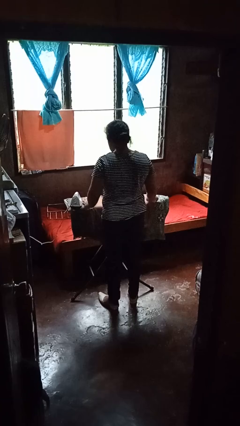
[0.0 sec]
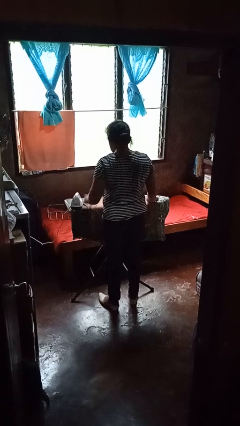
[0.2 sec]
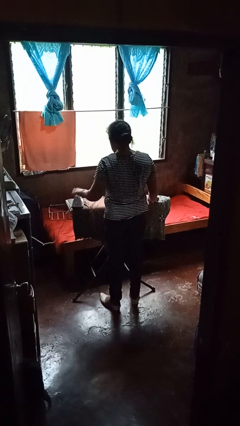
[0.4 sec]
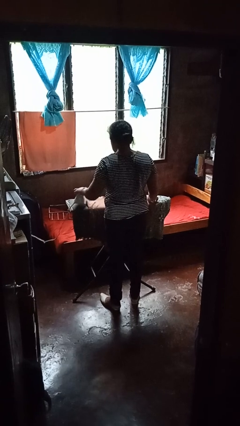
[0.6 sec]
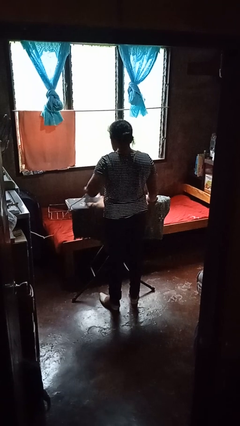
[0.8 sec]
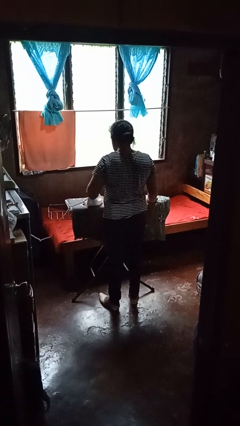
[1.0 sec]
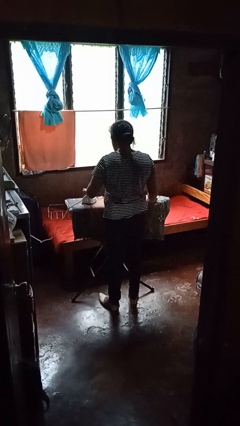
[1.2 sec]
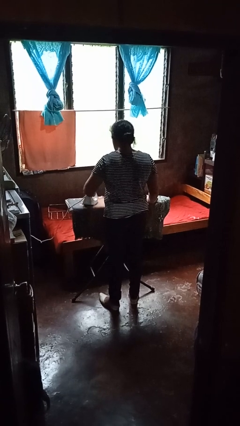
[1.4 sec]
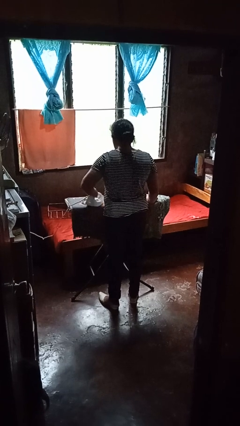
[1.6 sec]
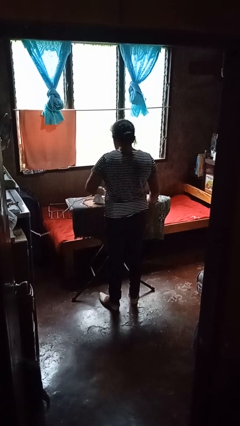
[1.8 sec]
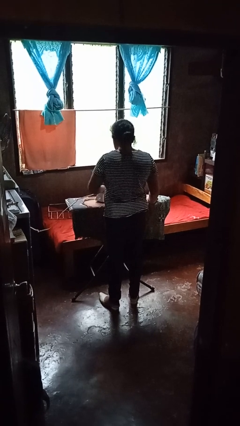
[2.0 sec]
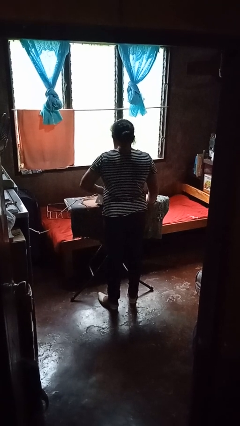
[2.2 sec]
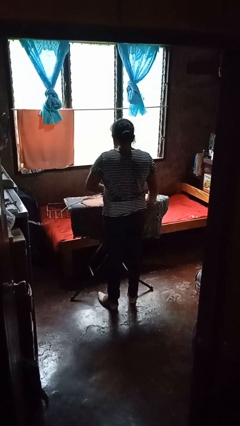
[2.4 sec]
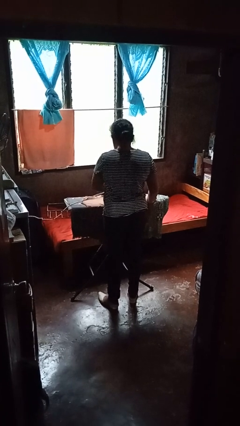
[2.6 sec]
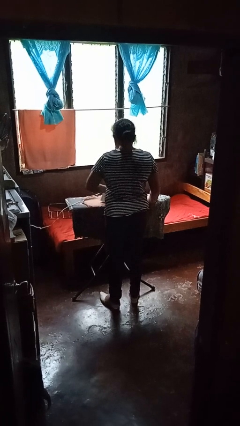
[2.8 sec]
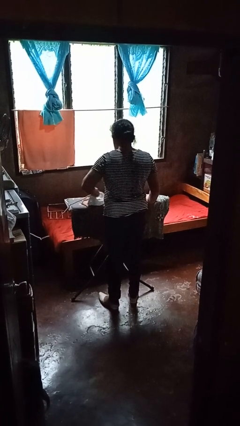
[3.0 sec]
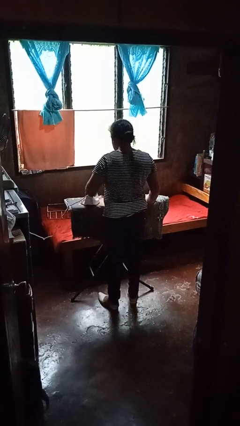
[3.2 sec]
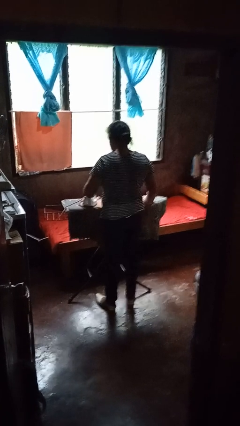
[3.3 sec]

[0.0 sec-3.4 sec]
person irons clothes

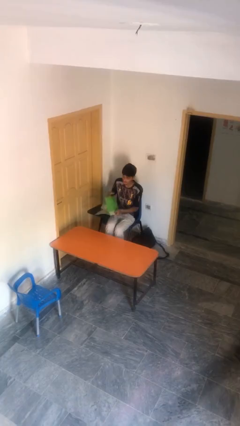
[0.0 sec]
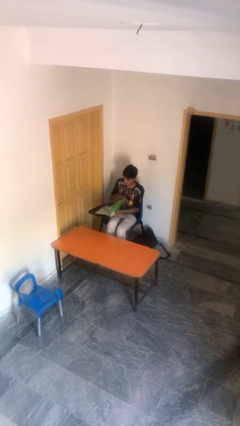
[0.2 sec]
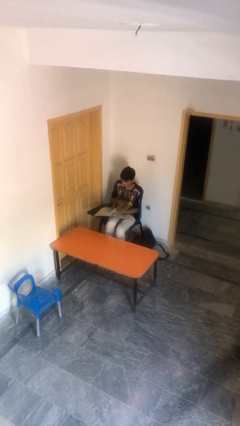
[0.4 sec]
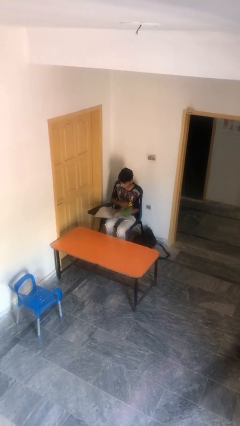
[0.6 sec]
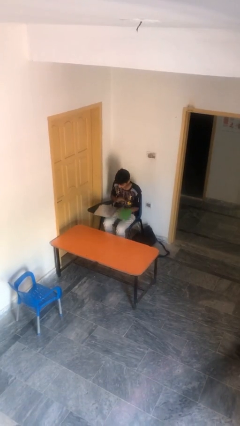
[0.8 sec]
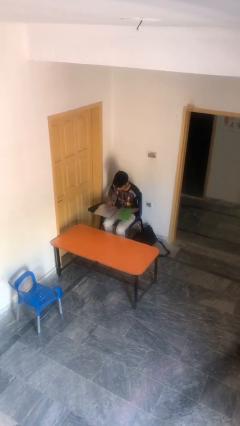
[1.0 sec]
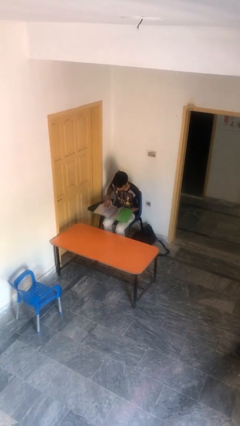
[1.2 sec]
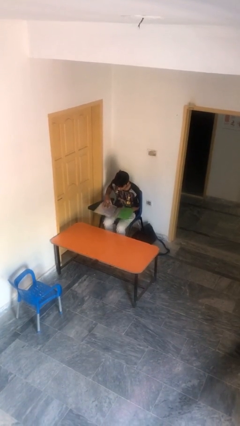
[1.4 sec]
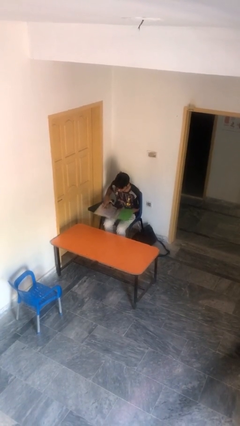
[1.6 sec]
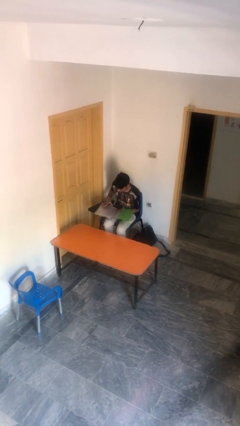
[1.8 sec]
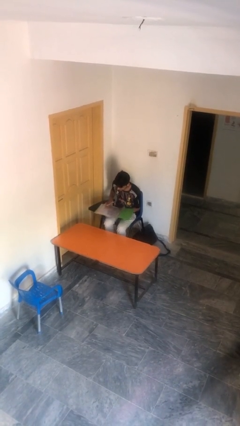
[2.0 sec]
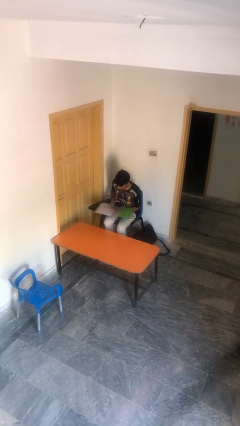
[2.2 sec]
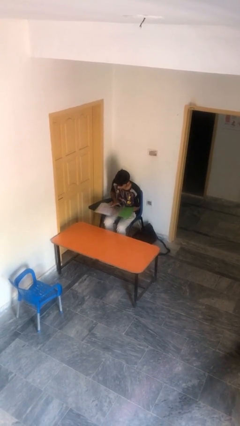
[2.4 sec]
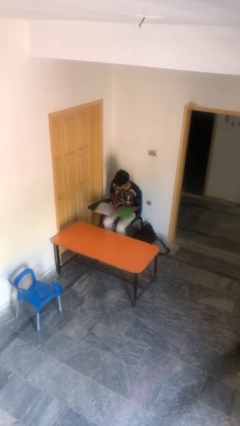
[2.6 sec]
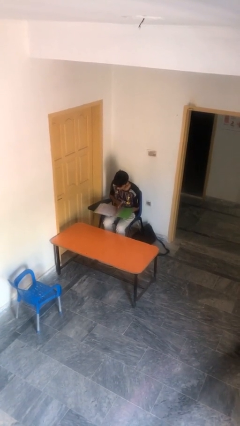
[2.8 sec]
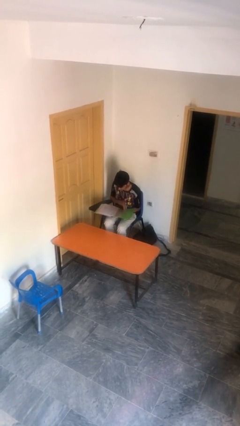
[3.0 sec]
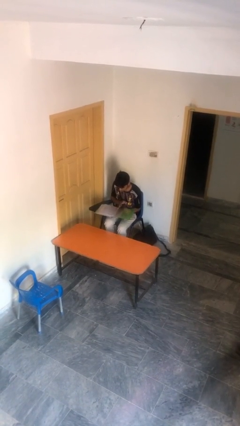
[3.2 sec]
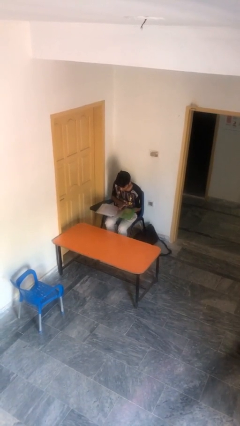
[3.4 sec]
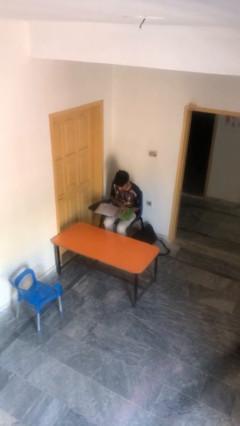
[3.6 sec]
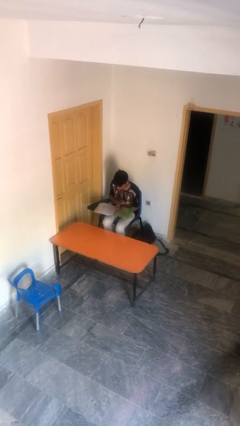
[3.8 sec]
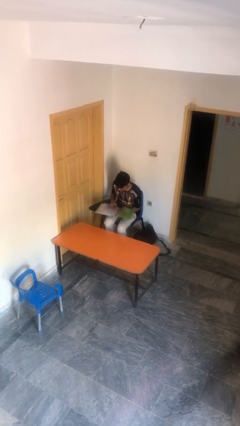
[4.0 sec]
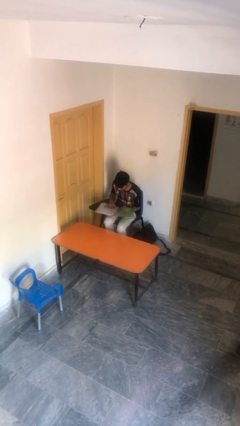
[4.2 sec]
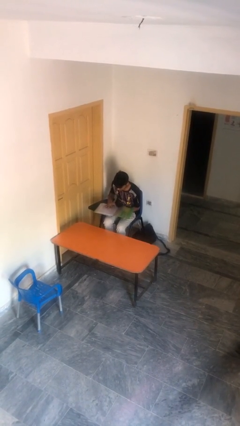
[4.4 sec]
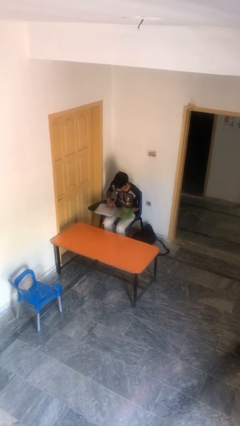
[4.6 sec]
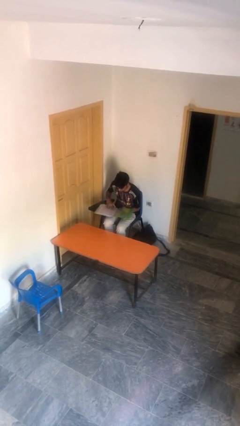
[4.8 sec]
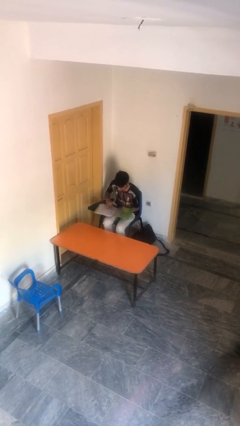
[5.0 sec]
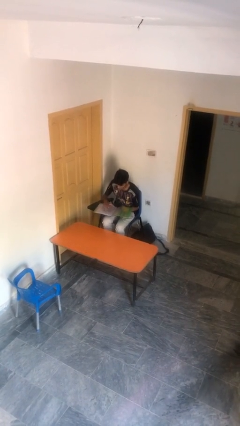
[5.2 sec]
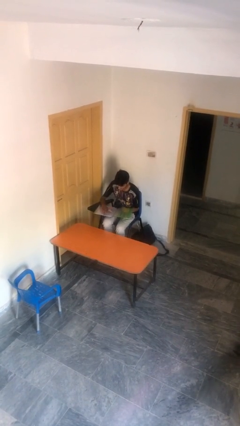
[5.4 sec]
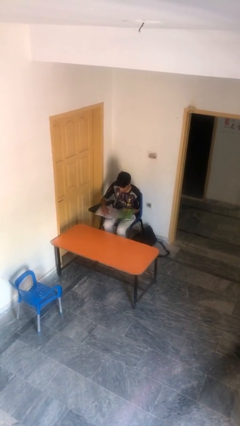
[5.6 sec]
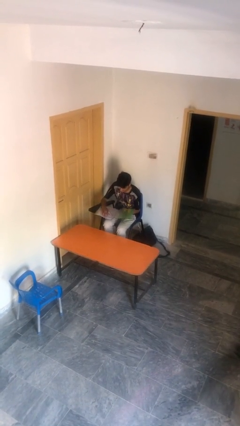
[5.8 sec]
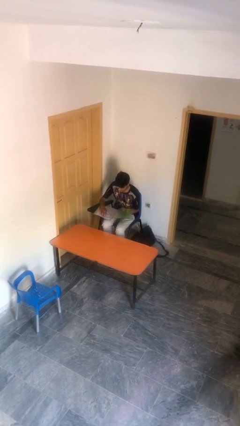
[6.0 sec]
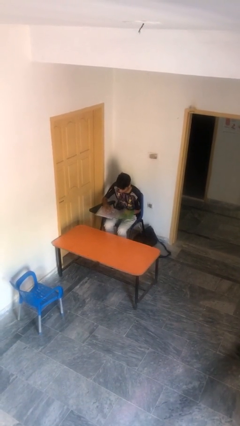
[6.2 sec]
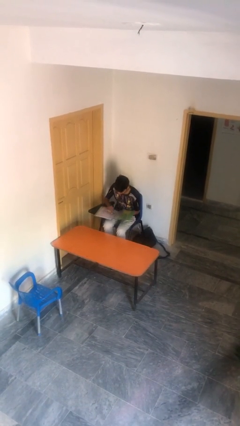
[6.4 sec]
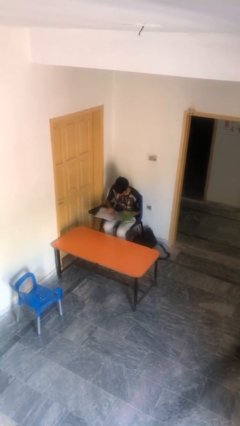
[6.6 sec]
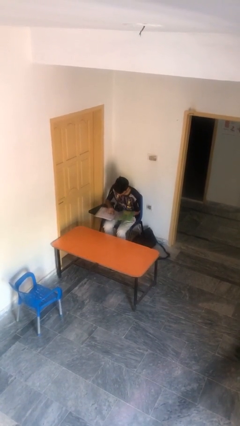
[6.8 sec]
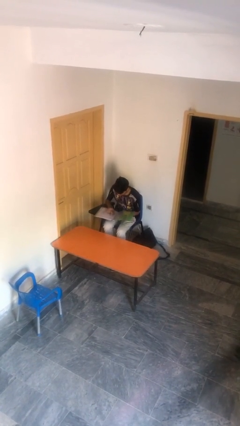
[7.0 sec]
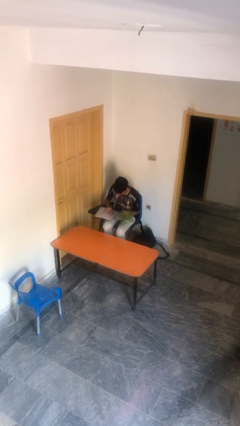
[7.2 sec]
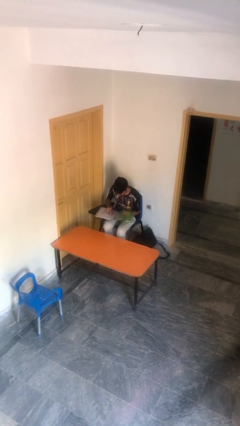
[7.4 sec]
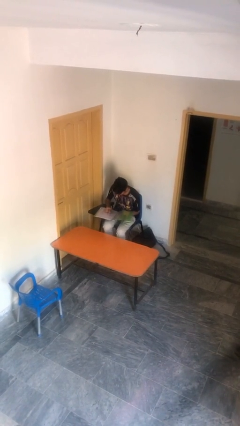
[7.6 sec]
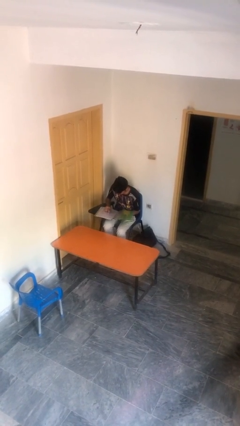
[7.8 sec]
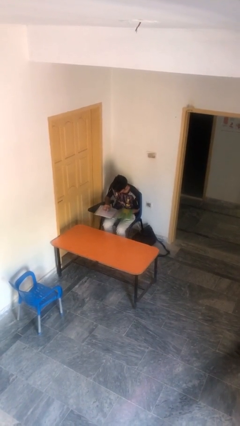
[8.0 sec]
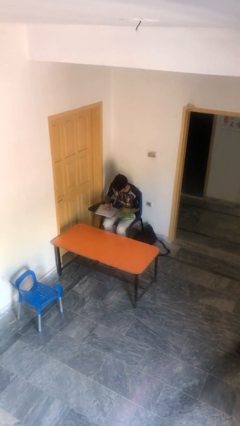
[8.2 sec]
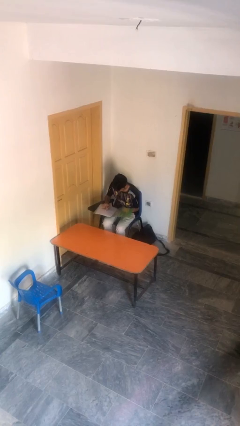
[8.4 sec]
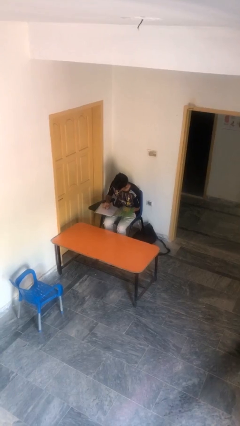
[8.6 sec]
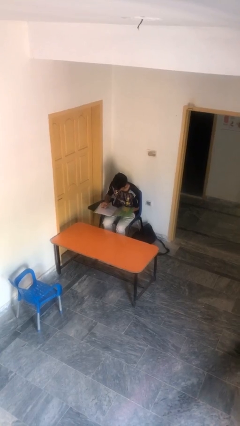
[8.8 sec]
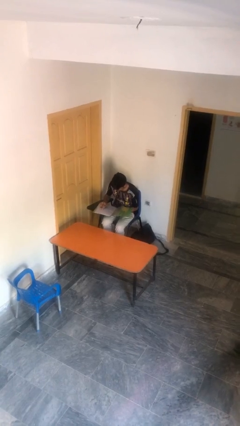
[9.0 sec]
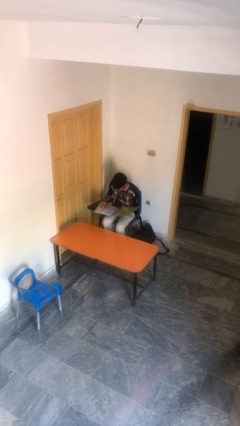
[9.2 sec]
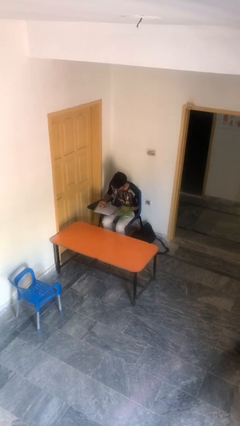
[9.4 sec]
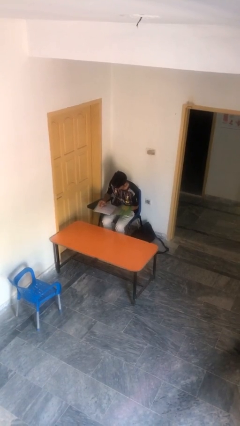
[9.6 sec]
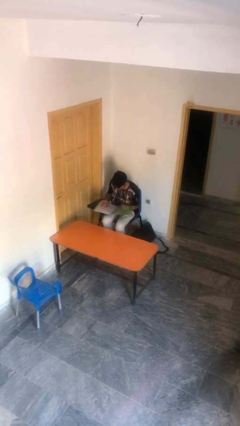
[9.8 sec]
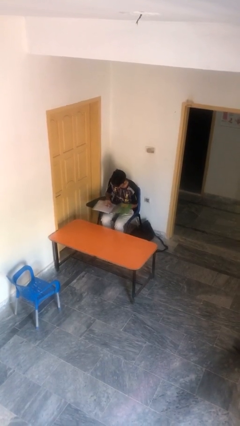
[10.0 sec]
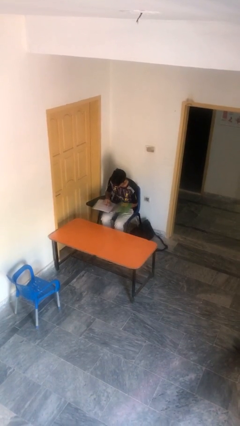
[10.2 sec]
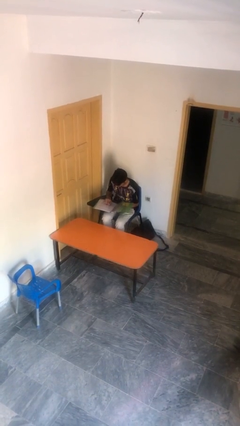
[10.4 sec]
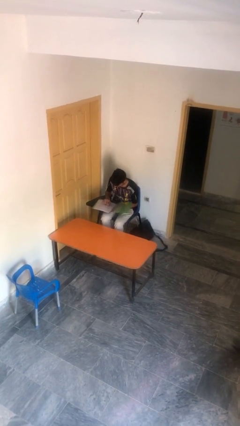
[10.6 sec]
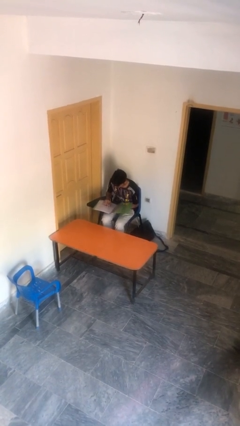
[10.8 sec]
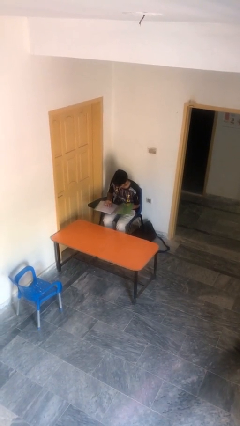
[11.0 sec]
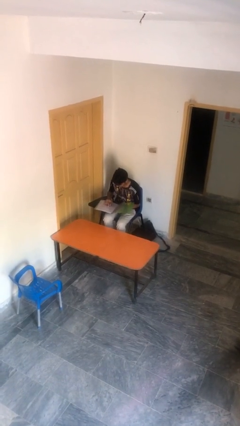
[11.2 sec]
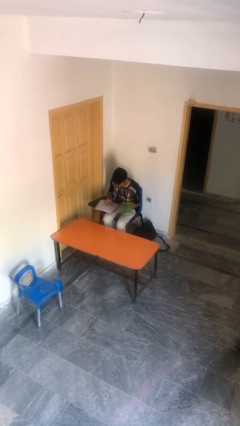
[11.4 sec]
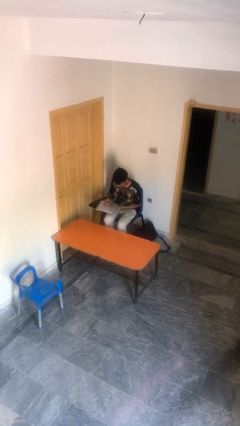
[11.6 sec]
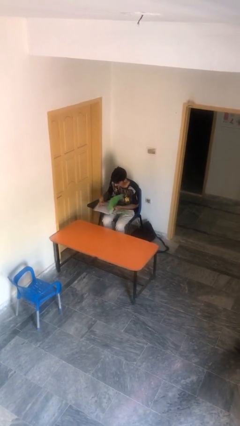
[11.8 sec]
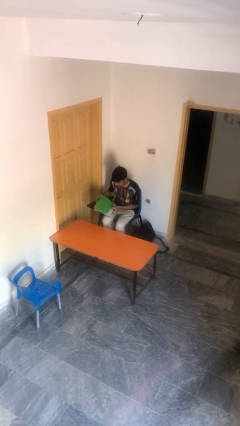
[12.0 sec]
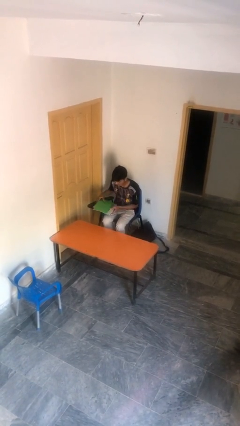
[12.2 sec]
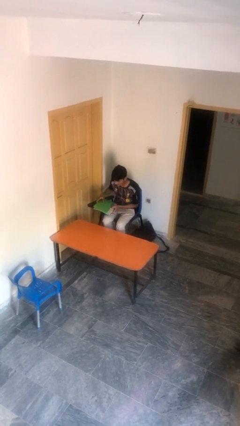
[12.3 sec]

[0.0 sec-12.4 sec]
person reads document

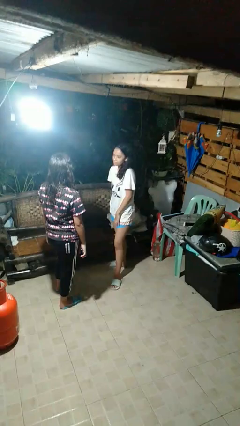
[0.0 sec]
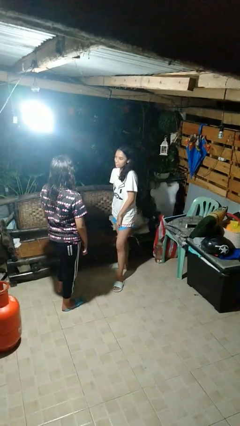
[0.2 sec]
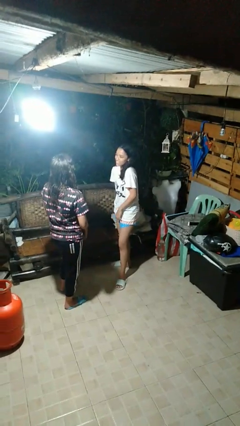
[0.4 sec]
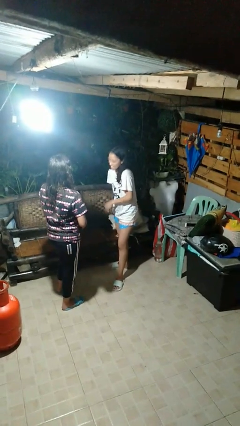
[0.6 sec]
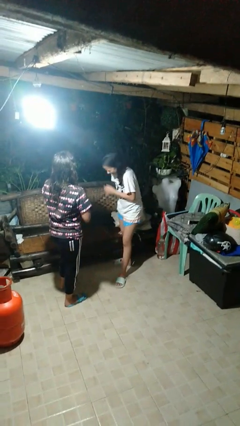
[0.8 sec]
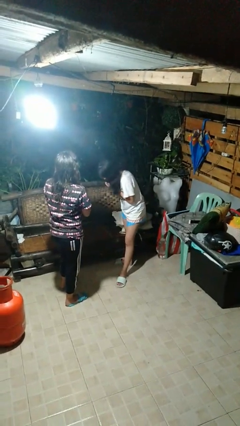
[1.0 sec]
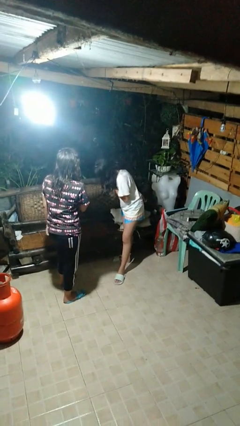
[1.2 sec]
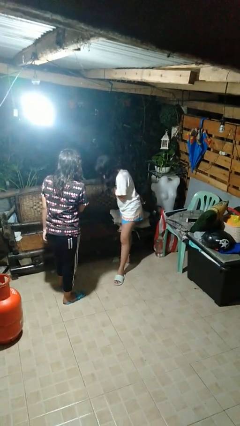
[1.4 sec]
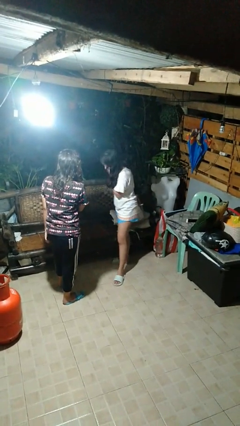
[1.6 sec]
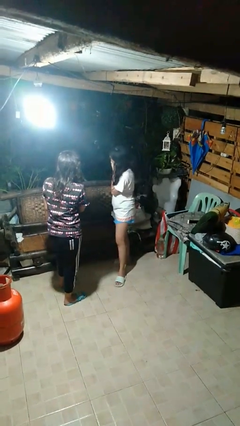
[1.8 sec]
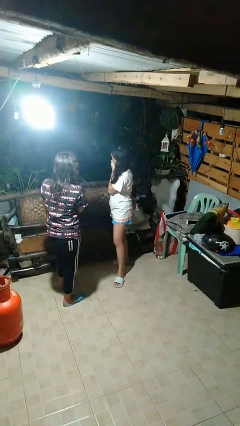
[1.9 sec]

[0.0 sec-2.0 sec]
person laughs with person
